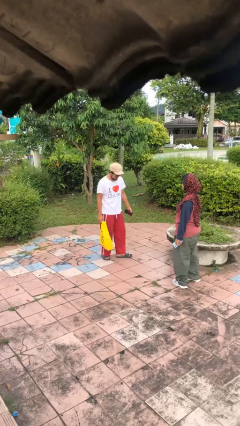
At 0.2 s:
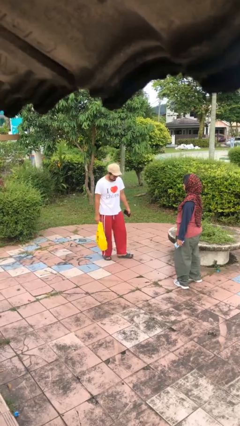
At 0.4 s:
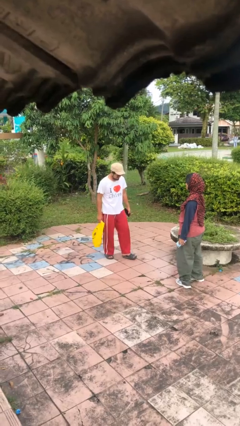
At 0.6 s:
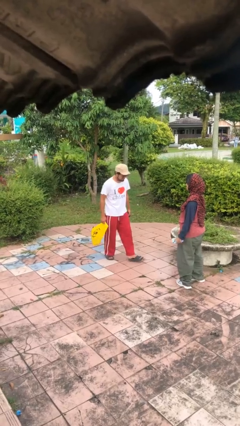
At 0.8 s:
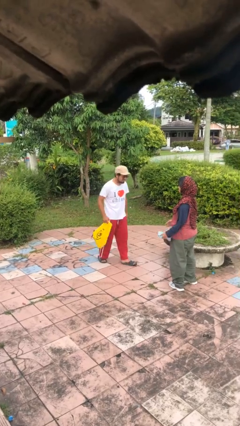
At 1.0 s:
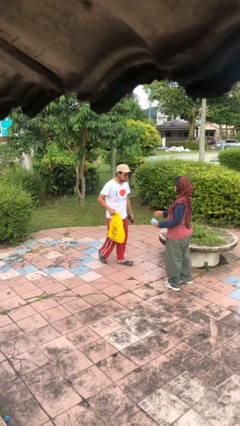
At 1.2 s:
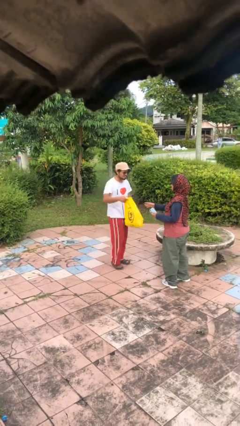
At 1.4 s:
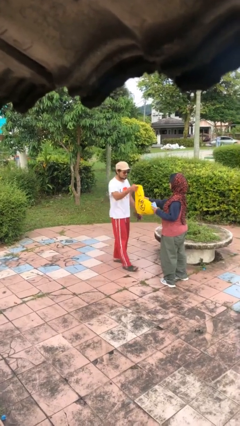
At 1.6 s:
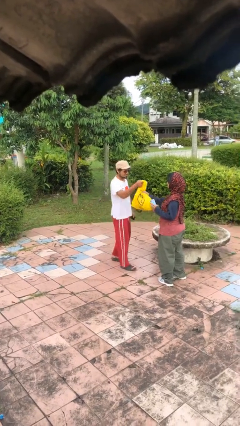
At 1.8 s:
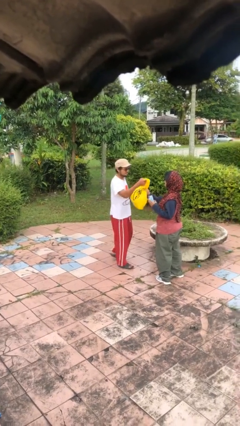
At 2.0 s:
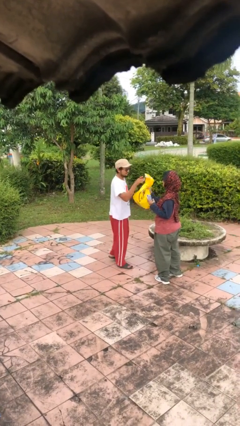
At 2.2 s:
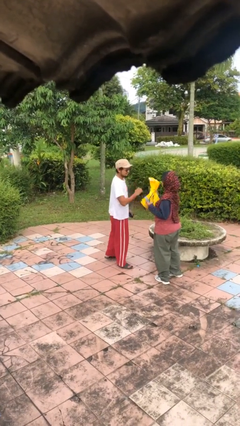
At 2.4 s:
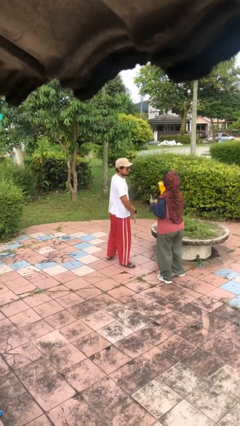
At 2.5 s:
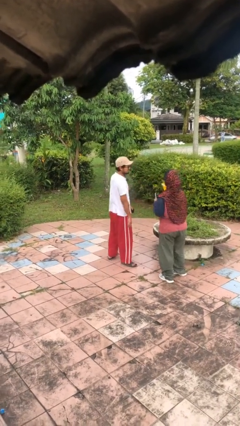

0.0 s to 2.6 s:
person transfers object to person

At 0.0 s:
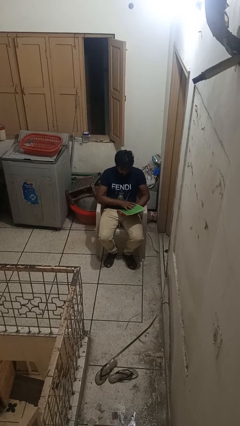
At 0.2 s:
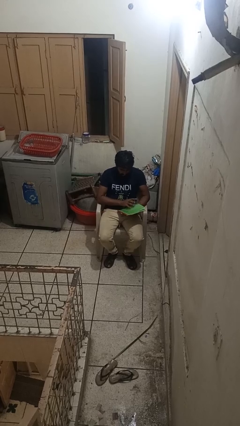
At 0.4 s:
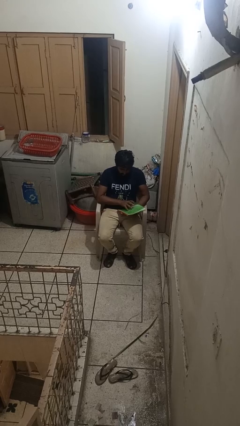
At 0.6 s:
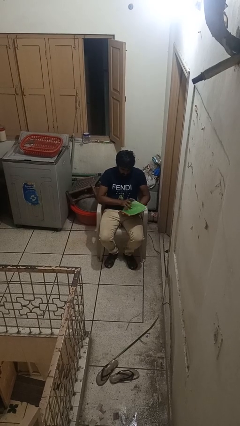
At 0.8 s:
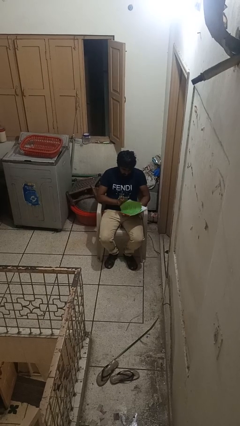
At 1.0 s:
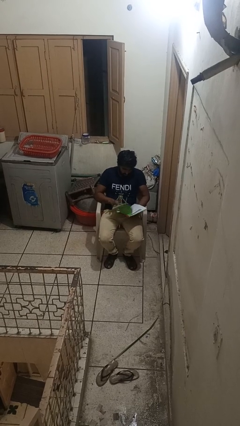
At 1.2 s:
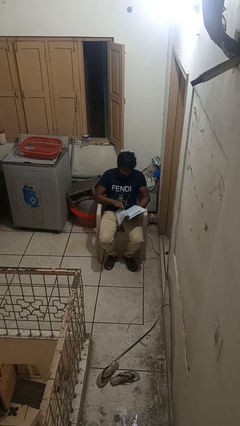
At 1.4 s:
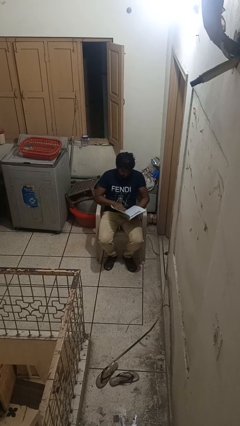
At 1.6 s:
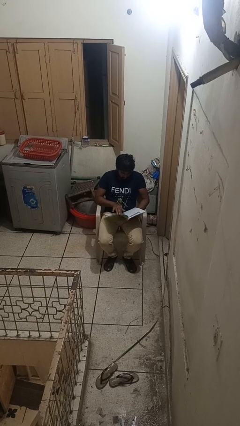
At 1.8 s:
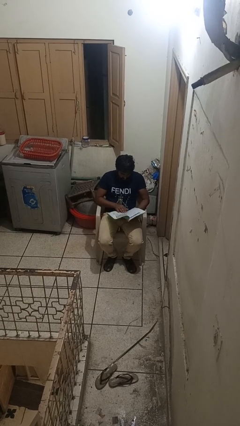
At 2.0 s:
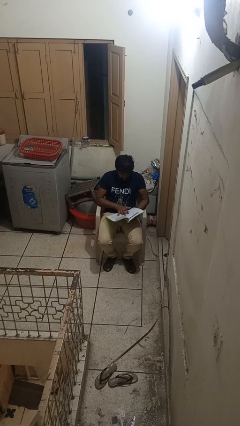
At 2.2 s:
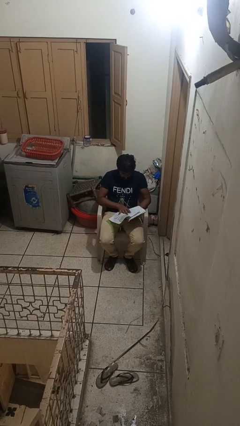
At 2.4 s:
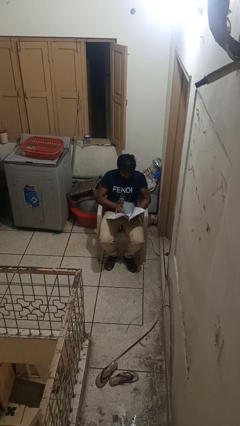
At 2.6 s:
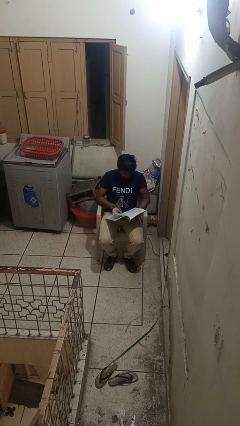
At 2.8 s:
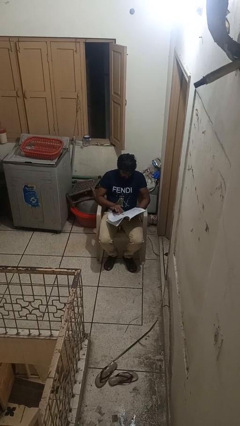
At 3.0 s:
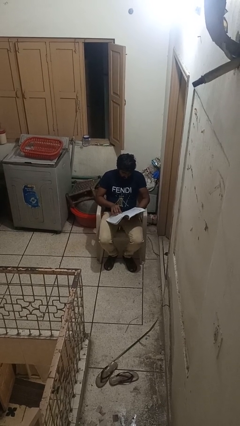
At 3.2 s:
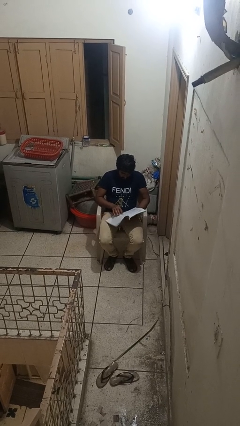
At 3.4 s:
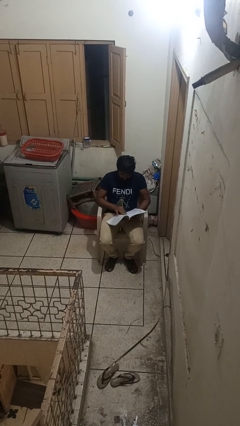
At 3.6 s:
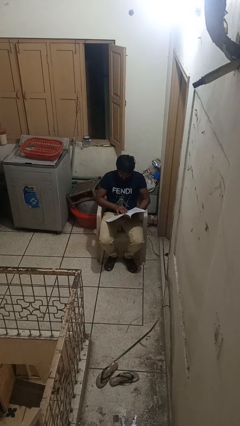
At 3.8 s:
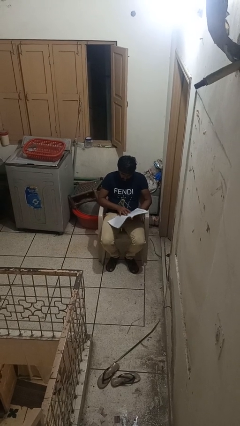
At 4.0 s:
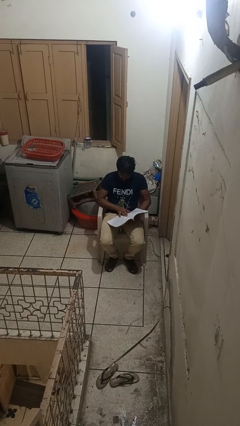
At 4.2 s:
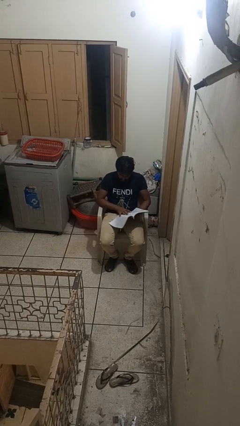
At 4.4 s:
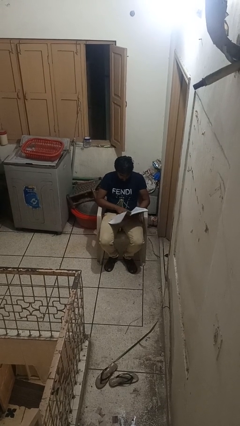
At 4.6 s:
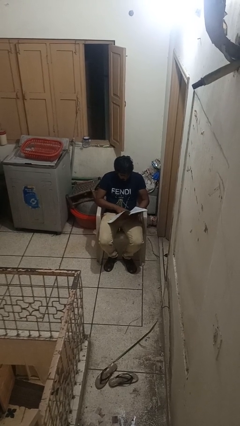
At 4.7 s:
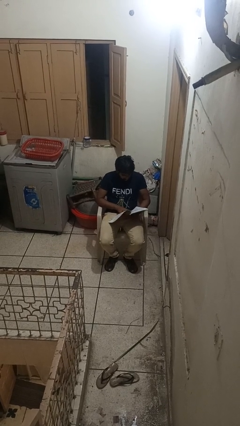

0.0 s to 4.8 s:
person reads magazine

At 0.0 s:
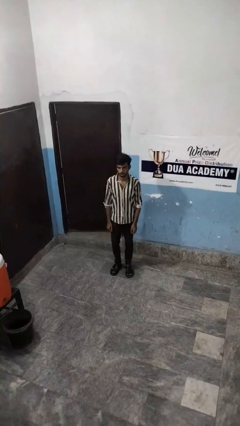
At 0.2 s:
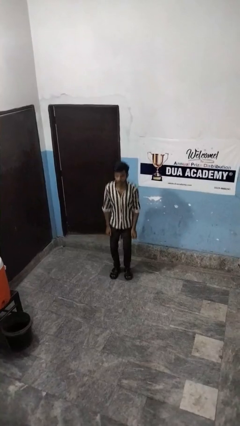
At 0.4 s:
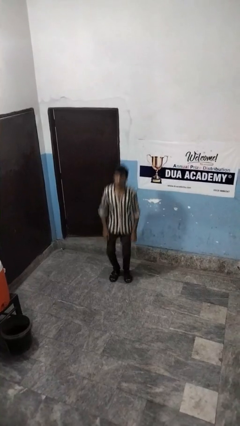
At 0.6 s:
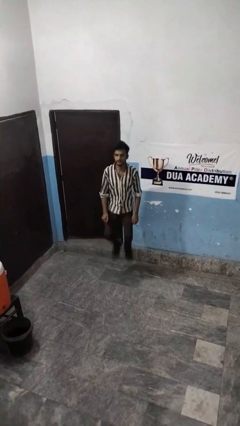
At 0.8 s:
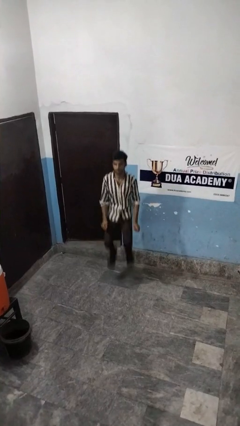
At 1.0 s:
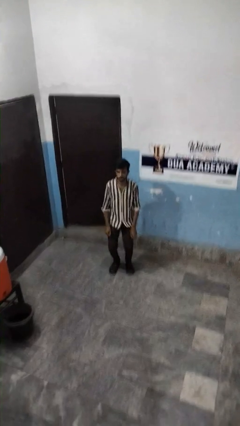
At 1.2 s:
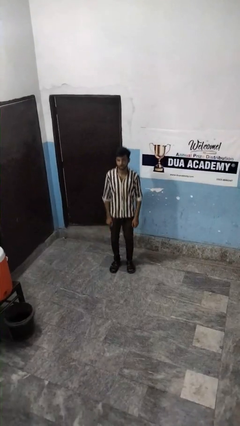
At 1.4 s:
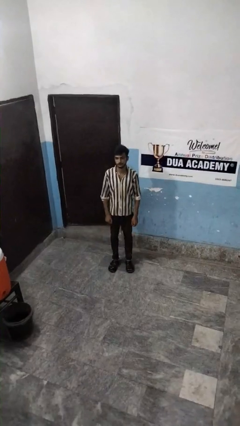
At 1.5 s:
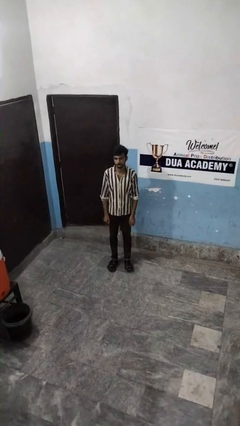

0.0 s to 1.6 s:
person jumps

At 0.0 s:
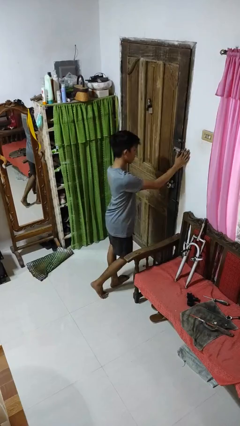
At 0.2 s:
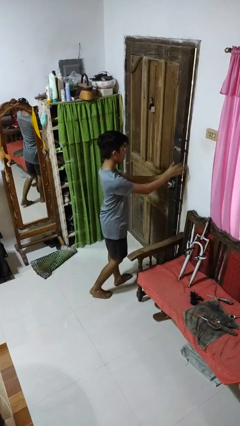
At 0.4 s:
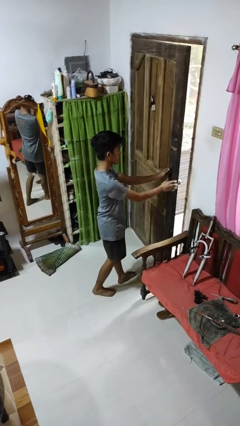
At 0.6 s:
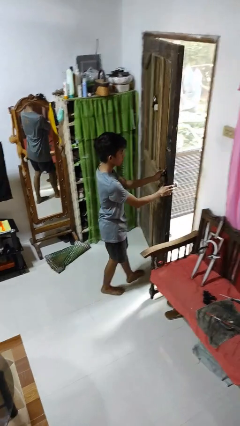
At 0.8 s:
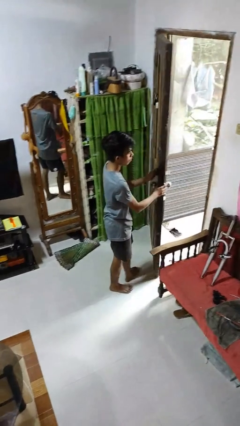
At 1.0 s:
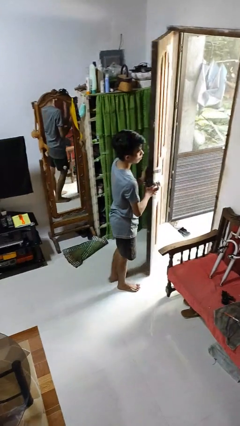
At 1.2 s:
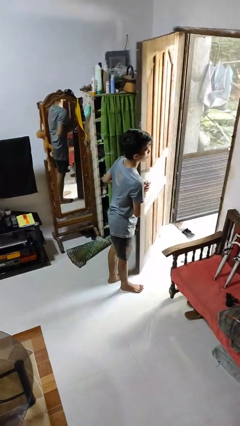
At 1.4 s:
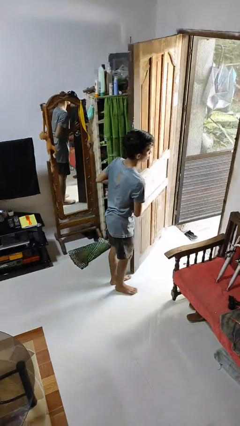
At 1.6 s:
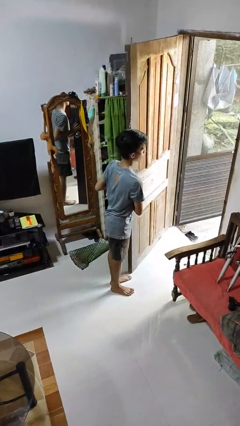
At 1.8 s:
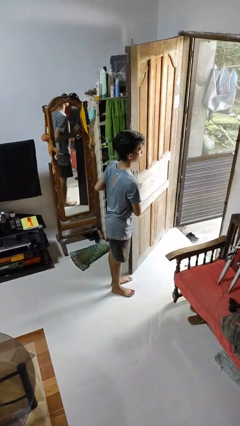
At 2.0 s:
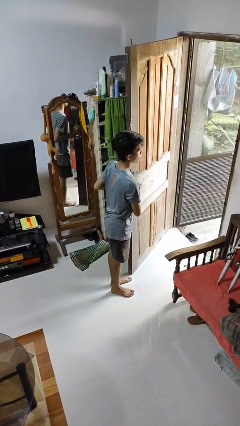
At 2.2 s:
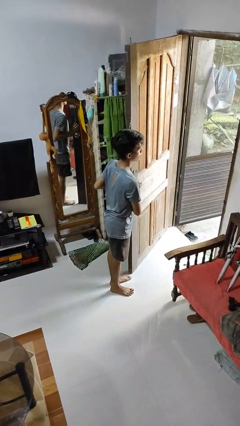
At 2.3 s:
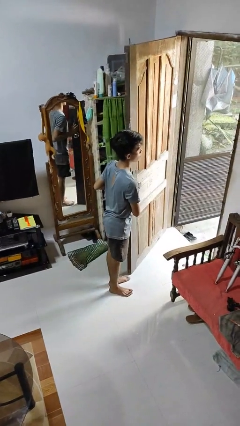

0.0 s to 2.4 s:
person opens facility door

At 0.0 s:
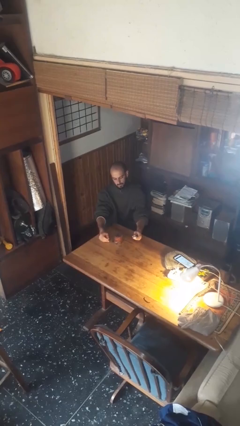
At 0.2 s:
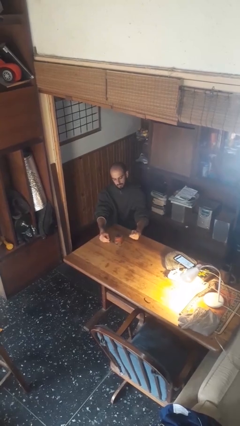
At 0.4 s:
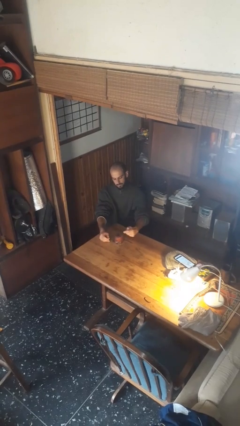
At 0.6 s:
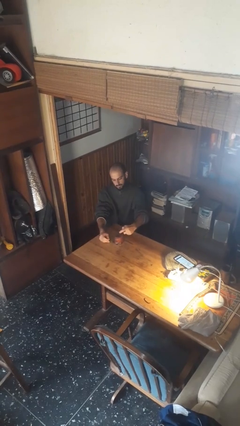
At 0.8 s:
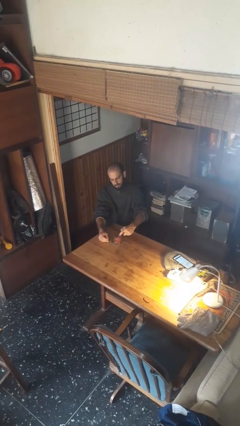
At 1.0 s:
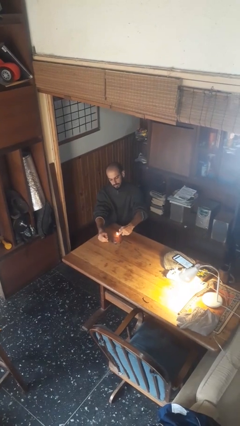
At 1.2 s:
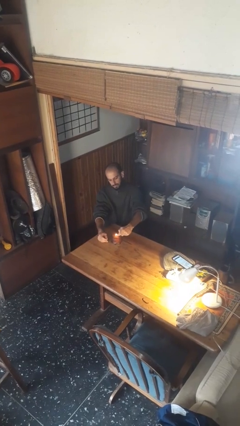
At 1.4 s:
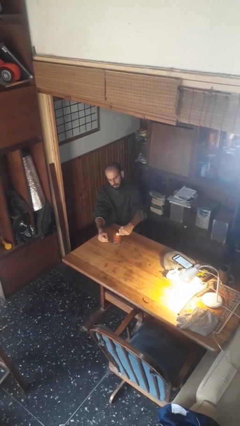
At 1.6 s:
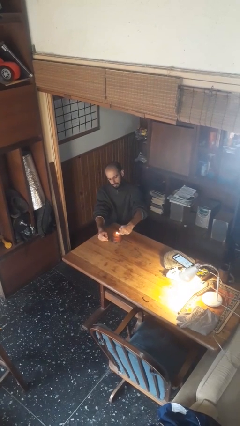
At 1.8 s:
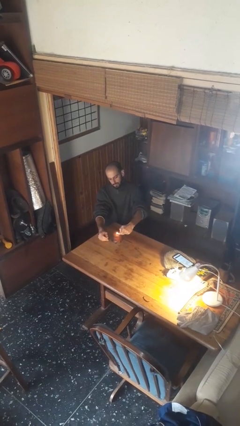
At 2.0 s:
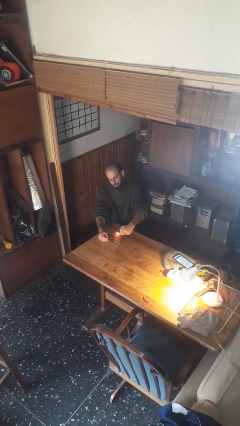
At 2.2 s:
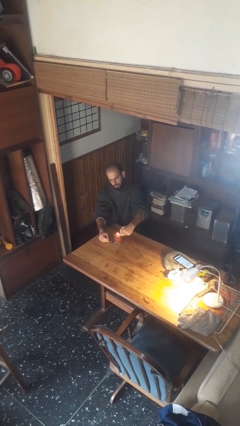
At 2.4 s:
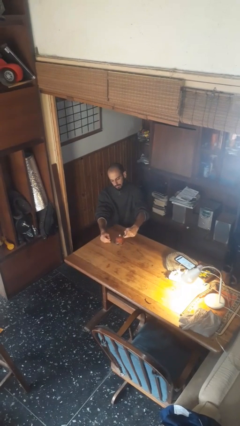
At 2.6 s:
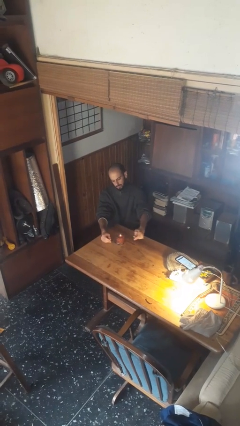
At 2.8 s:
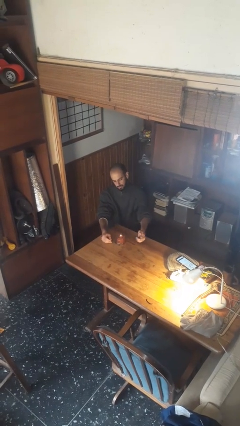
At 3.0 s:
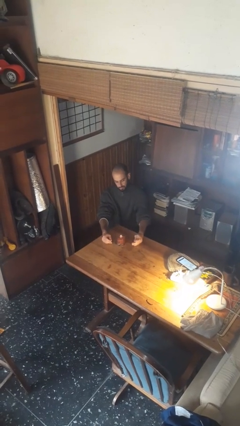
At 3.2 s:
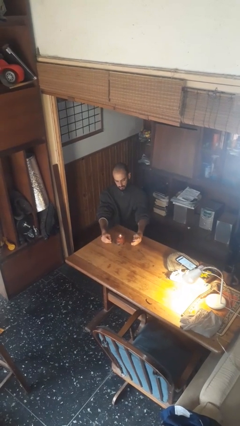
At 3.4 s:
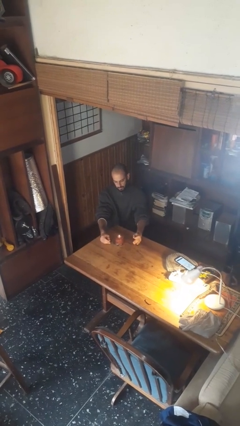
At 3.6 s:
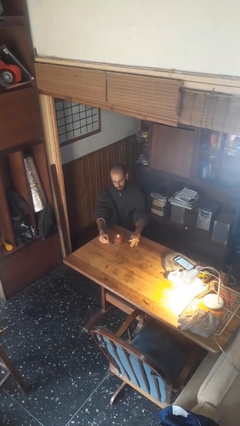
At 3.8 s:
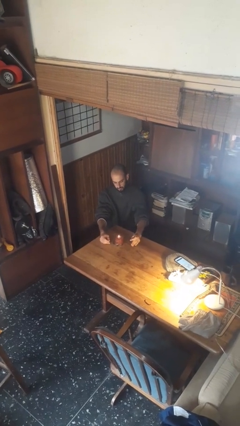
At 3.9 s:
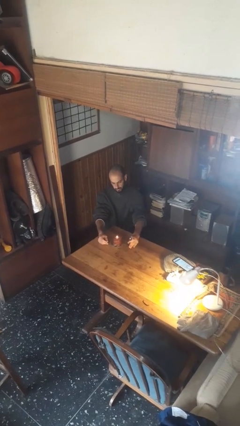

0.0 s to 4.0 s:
person lights candle

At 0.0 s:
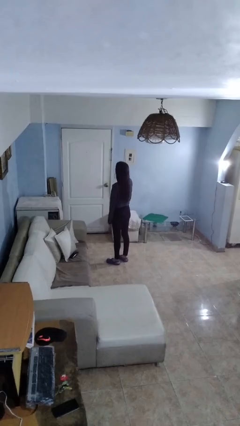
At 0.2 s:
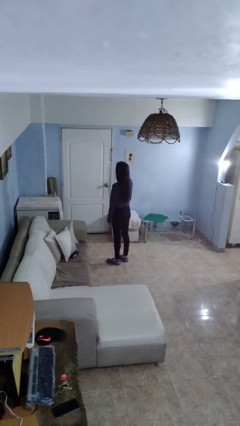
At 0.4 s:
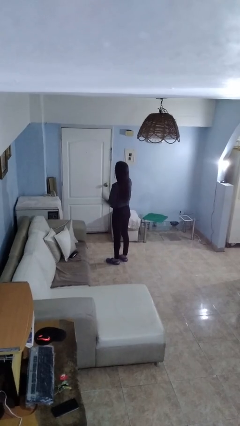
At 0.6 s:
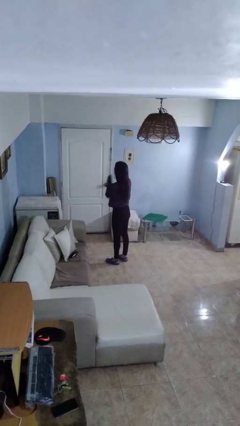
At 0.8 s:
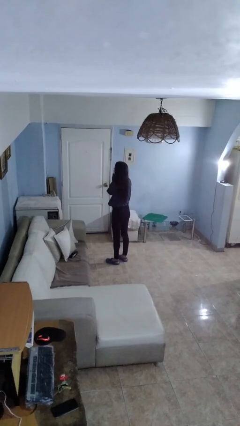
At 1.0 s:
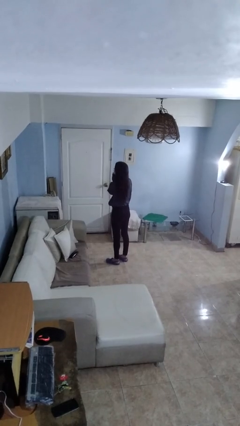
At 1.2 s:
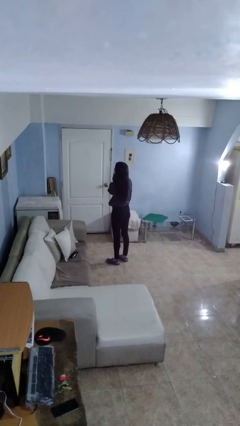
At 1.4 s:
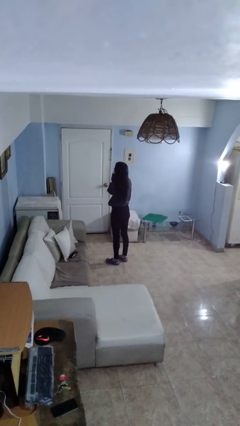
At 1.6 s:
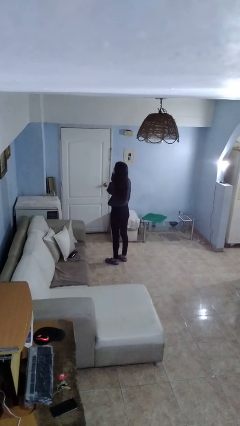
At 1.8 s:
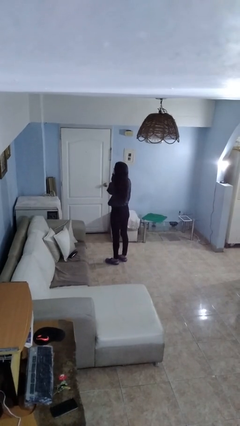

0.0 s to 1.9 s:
person strokes chin
